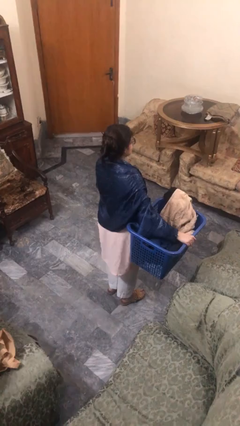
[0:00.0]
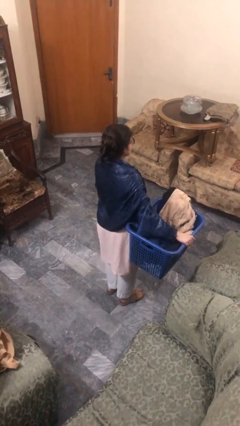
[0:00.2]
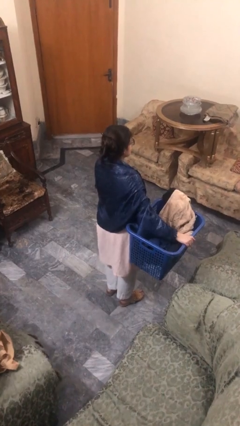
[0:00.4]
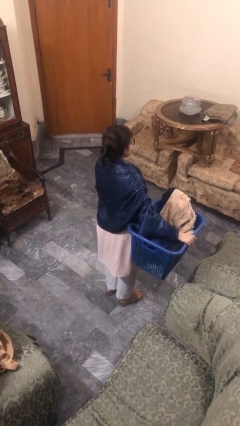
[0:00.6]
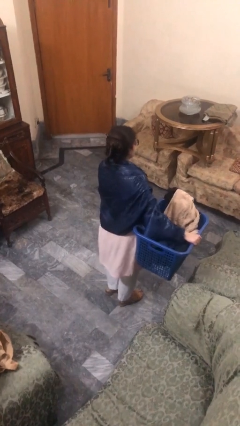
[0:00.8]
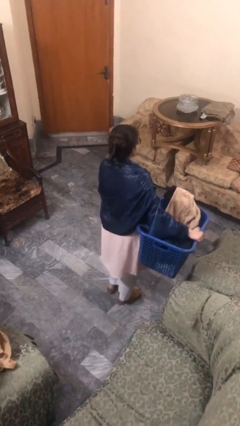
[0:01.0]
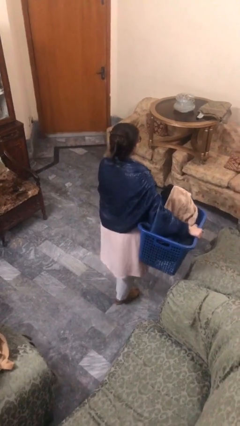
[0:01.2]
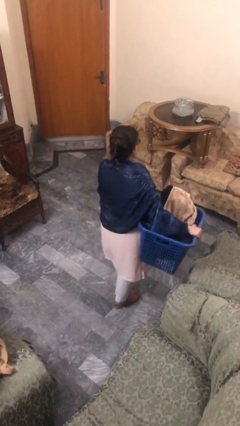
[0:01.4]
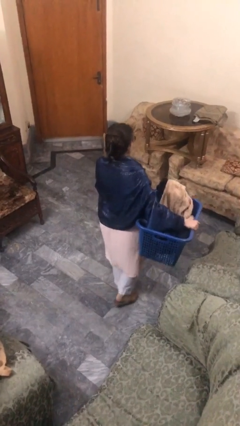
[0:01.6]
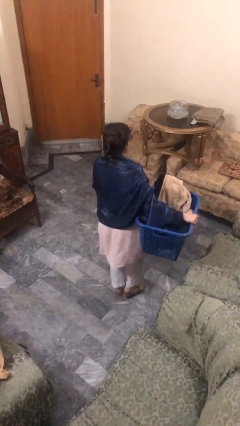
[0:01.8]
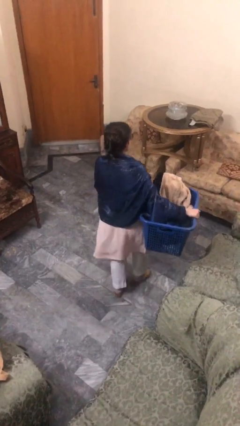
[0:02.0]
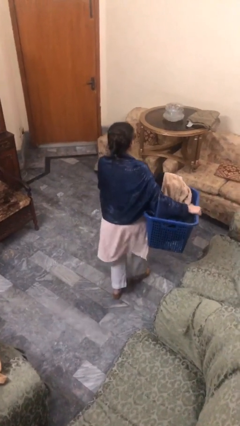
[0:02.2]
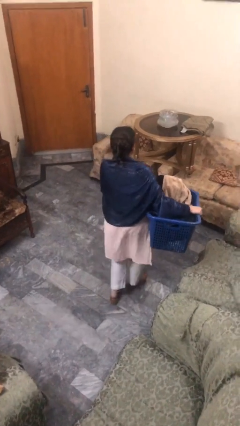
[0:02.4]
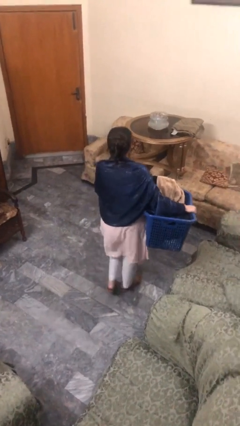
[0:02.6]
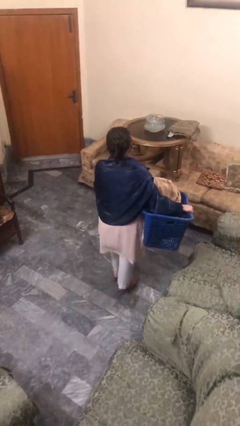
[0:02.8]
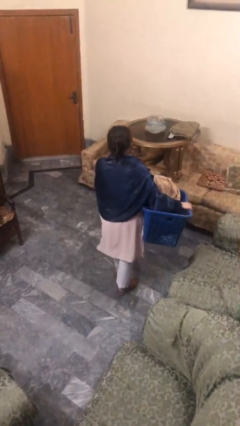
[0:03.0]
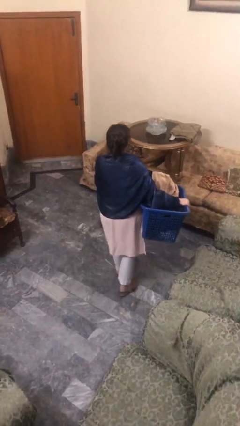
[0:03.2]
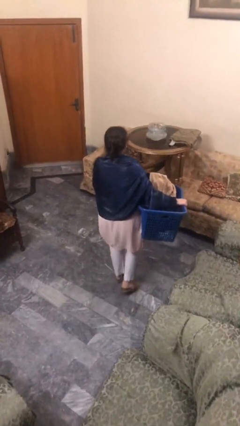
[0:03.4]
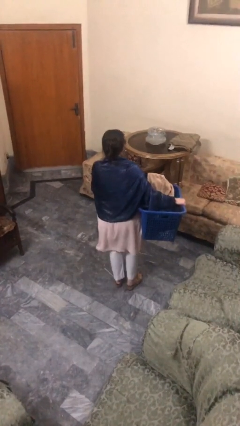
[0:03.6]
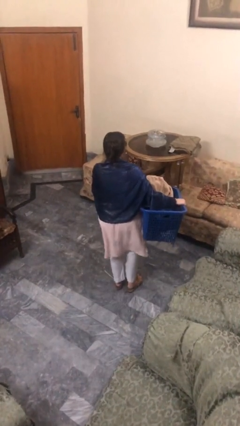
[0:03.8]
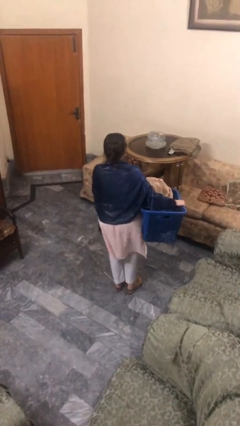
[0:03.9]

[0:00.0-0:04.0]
person carries laundry basket

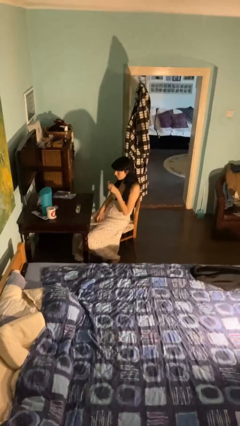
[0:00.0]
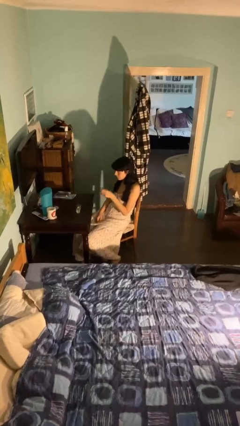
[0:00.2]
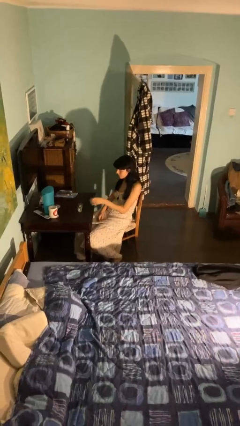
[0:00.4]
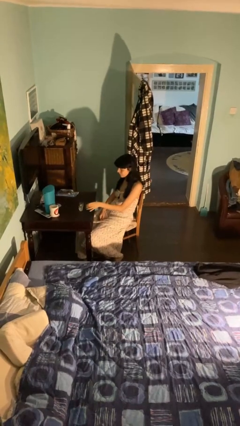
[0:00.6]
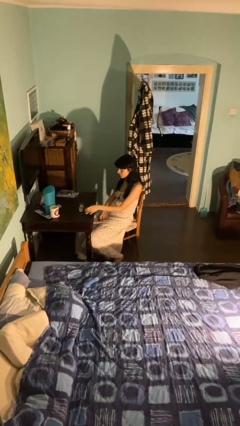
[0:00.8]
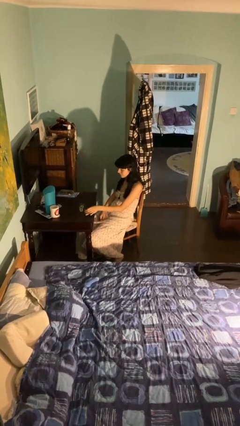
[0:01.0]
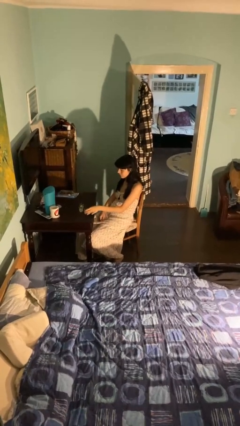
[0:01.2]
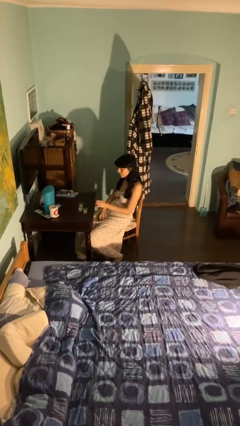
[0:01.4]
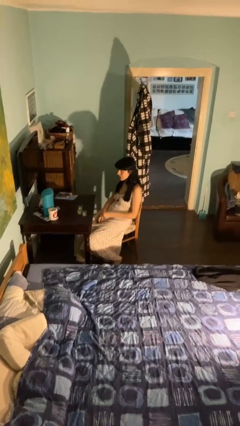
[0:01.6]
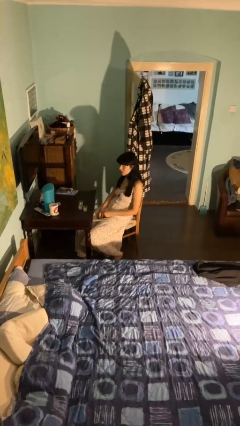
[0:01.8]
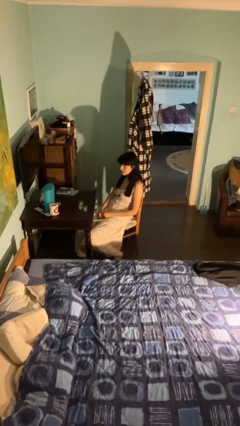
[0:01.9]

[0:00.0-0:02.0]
person puts down object on table

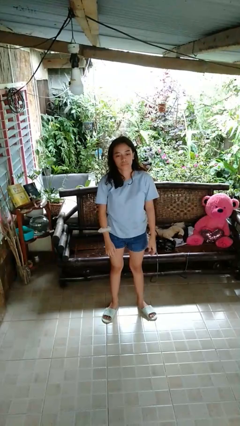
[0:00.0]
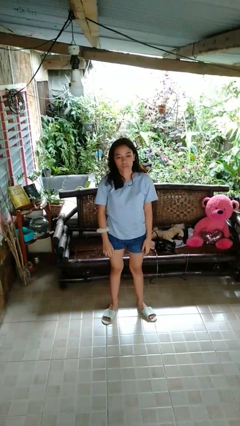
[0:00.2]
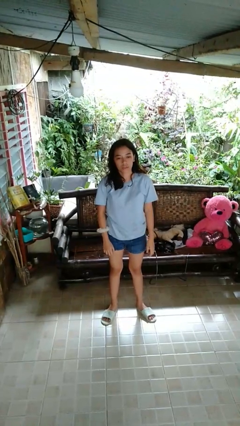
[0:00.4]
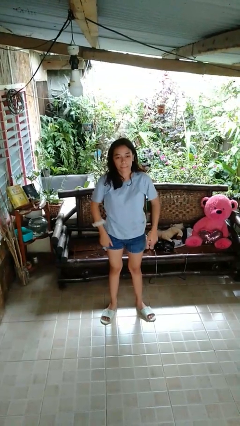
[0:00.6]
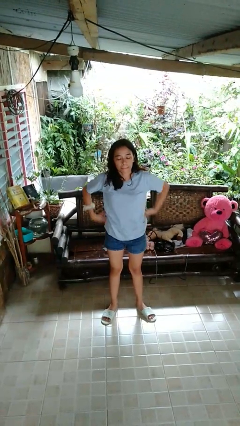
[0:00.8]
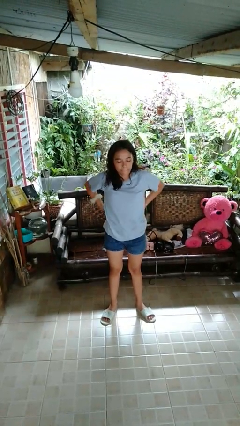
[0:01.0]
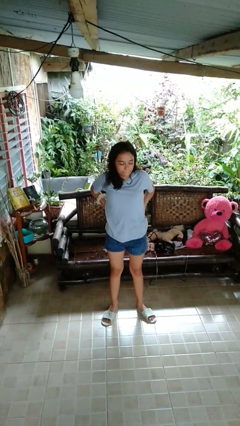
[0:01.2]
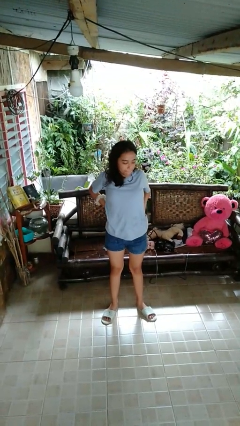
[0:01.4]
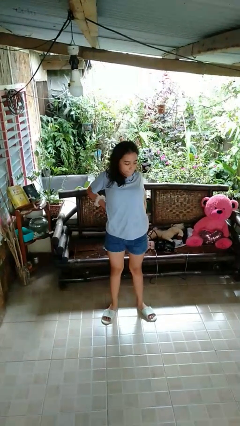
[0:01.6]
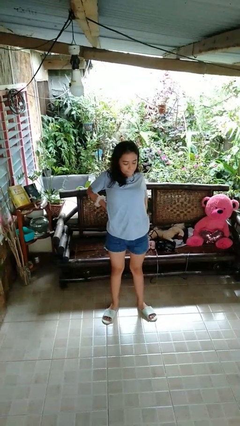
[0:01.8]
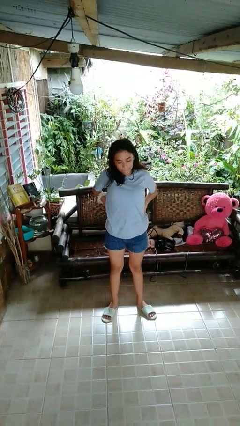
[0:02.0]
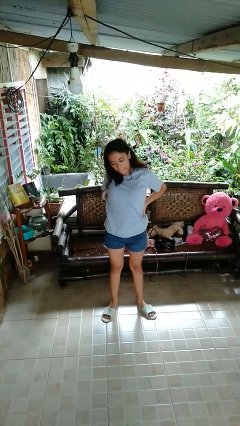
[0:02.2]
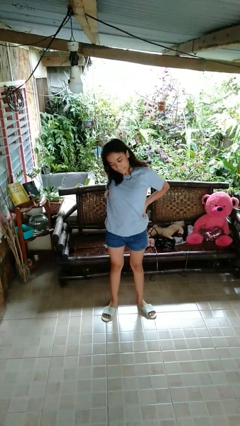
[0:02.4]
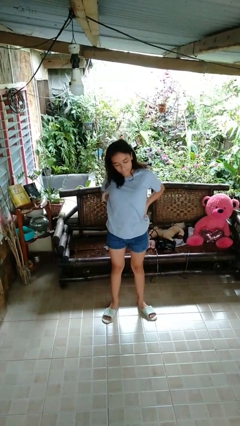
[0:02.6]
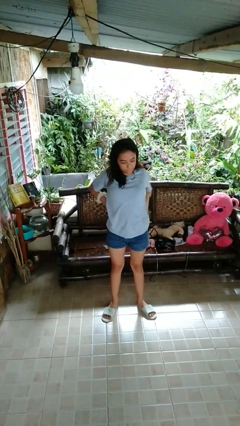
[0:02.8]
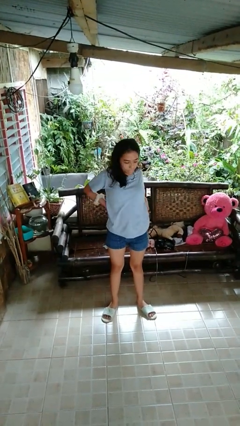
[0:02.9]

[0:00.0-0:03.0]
person stretches back

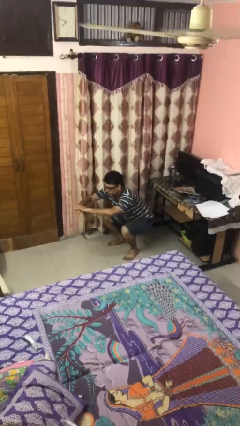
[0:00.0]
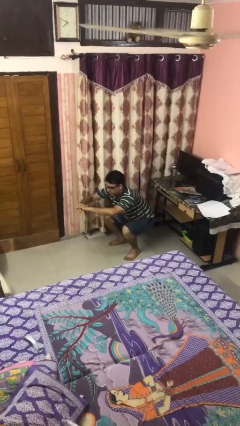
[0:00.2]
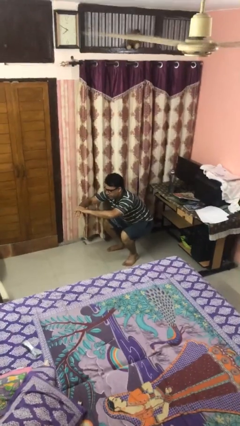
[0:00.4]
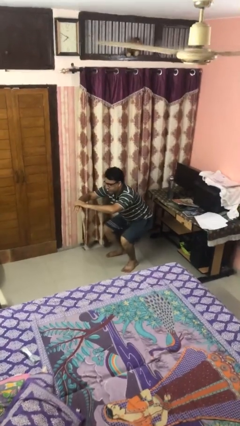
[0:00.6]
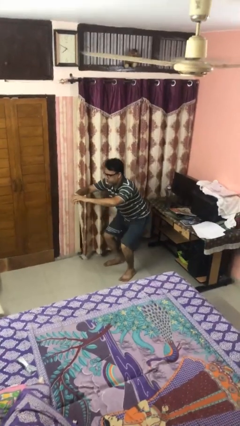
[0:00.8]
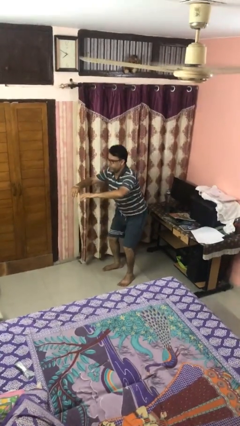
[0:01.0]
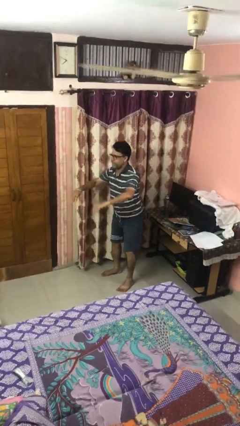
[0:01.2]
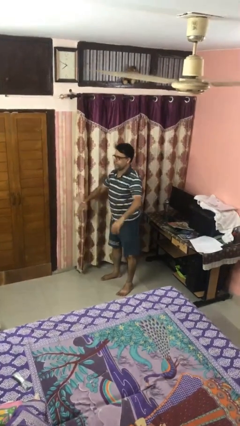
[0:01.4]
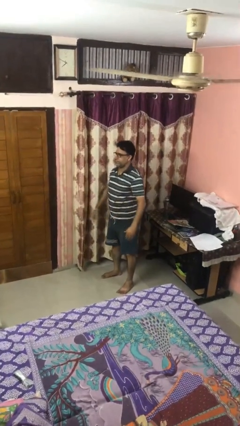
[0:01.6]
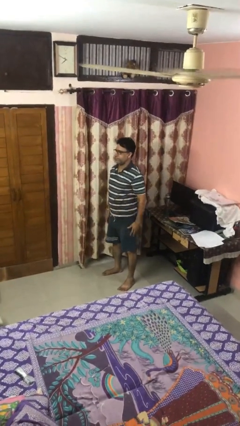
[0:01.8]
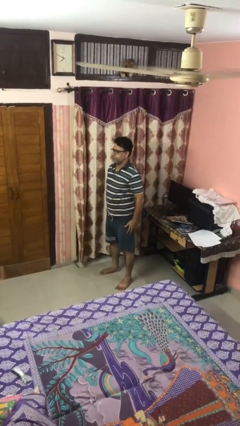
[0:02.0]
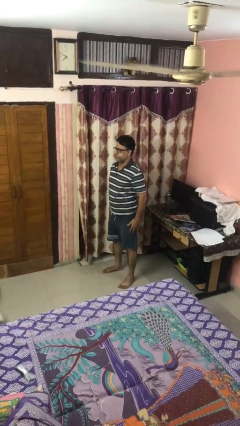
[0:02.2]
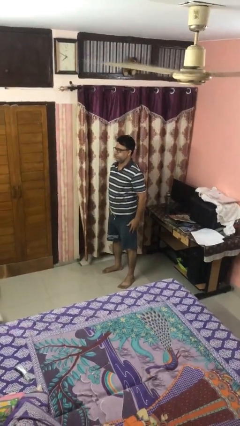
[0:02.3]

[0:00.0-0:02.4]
person stands up

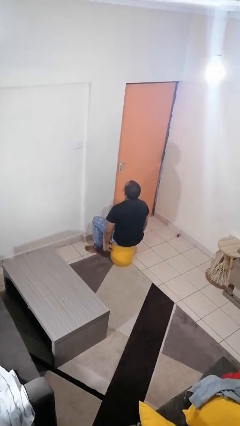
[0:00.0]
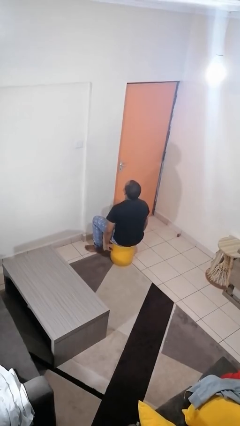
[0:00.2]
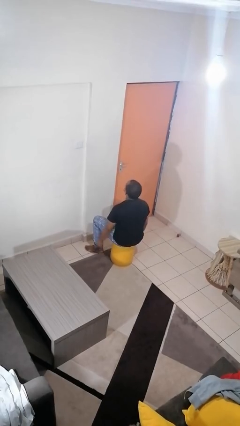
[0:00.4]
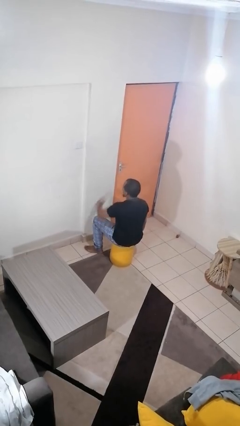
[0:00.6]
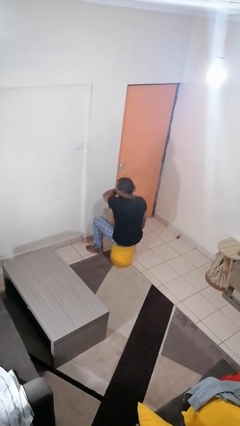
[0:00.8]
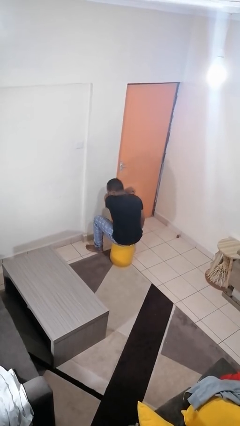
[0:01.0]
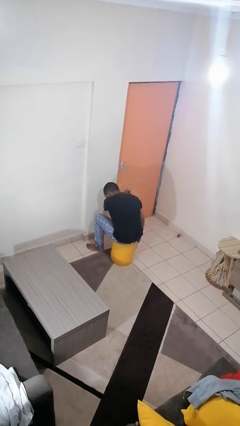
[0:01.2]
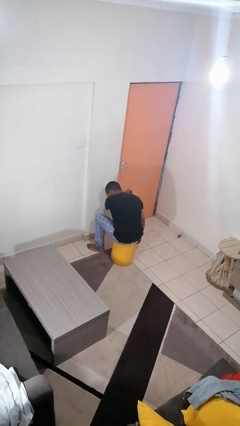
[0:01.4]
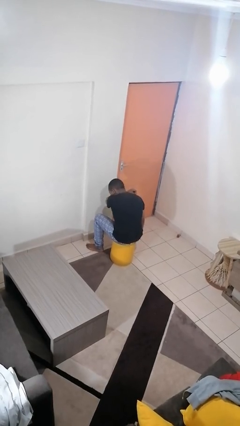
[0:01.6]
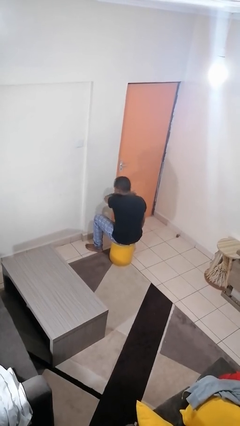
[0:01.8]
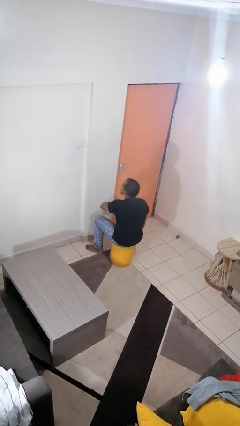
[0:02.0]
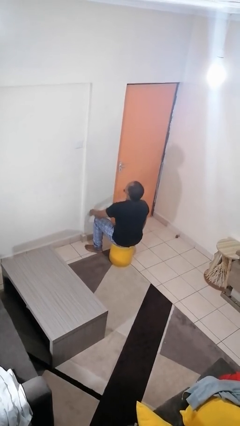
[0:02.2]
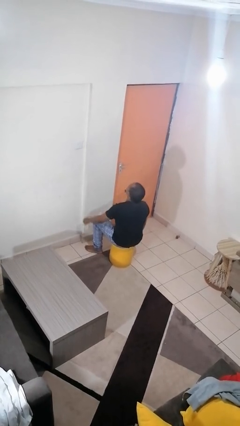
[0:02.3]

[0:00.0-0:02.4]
person sneezes into arm

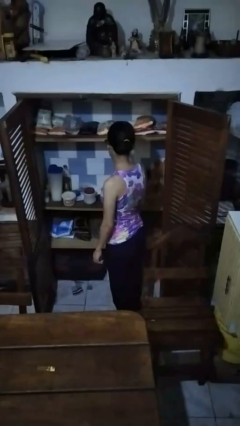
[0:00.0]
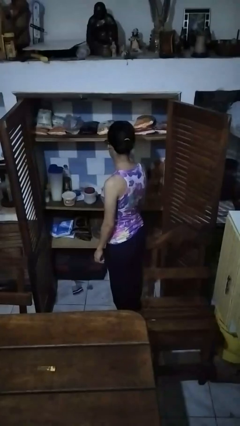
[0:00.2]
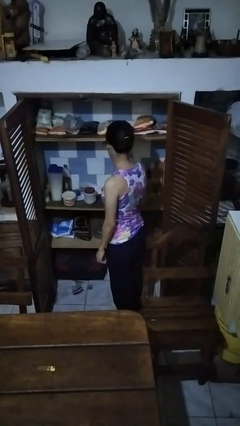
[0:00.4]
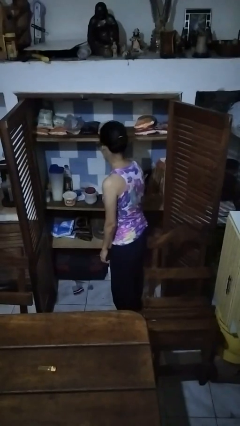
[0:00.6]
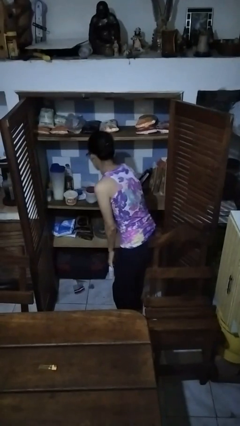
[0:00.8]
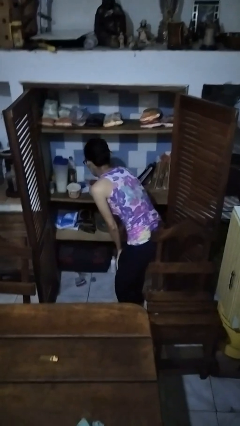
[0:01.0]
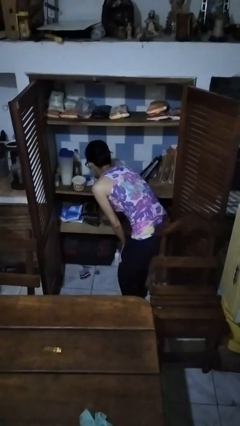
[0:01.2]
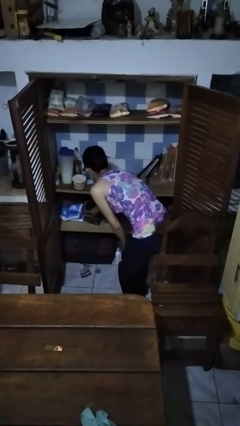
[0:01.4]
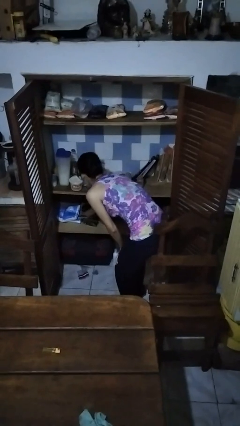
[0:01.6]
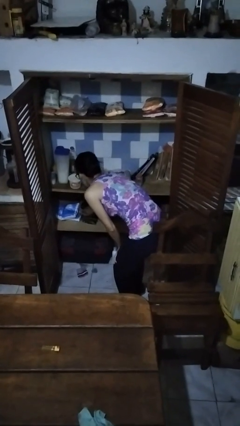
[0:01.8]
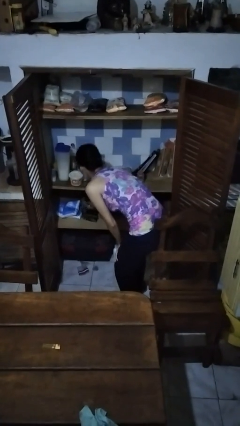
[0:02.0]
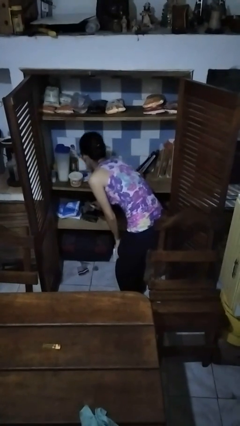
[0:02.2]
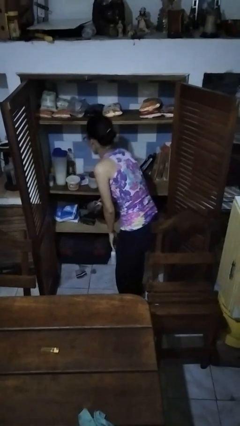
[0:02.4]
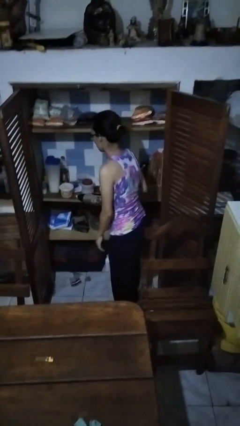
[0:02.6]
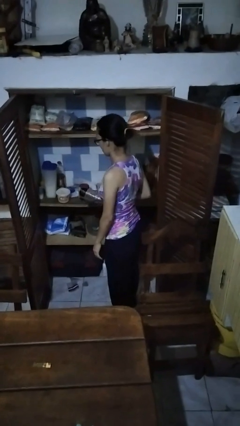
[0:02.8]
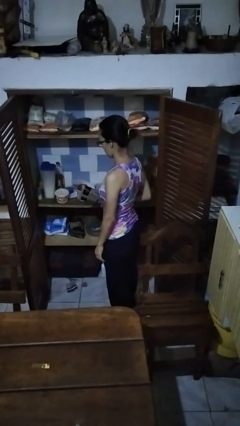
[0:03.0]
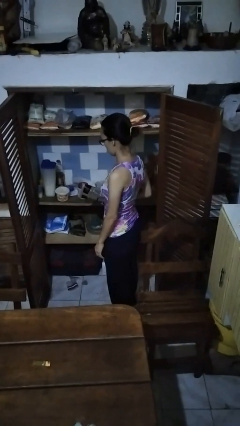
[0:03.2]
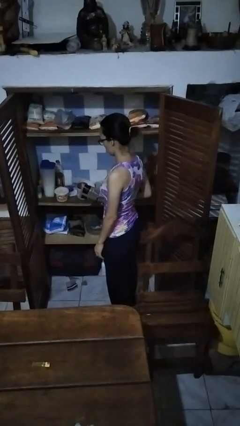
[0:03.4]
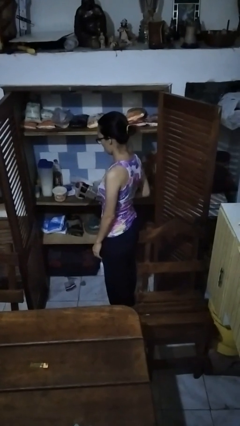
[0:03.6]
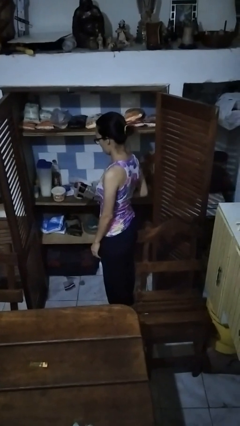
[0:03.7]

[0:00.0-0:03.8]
person takes object from cabinet
